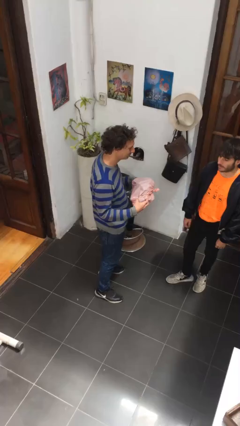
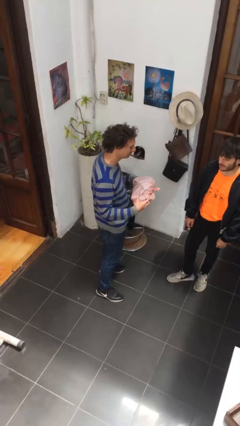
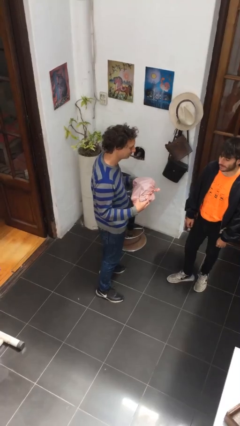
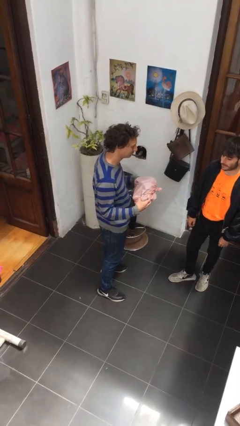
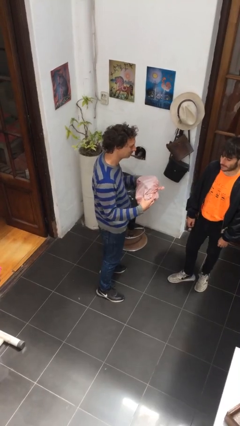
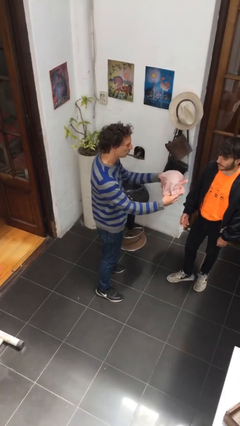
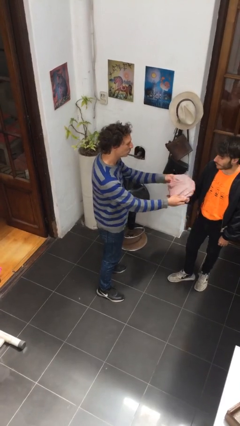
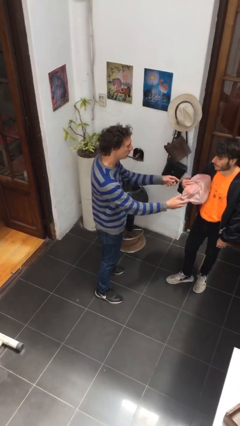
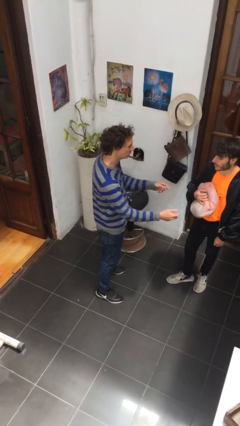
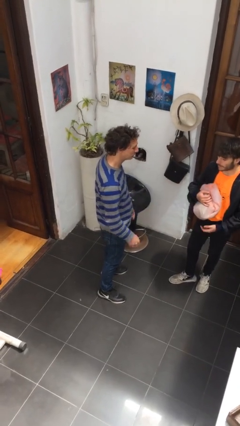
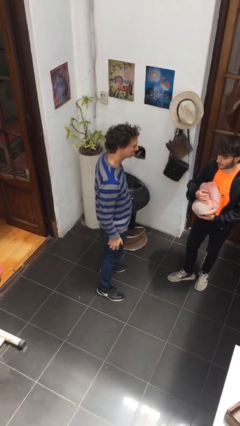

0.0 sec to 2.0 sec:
person transfers object to person

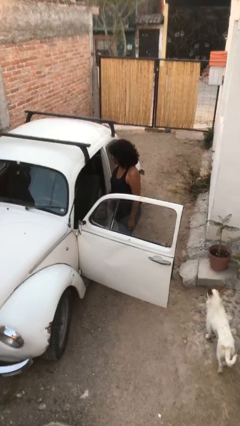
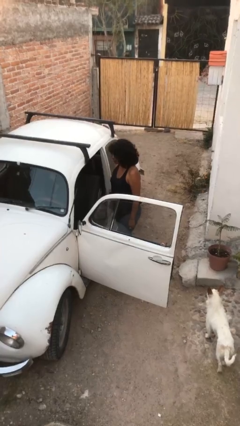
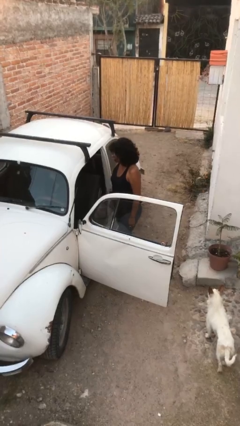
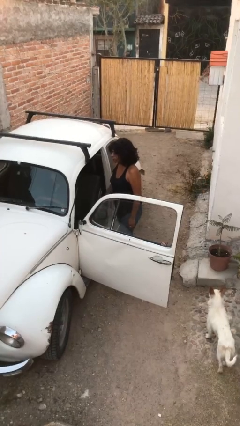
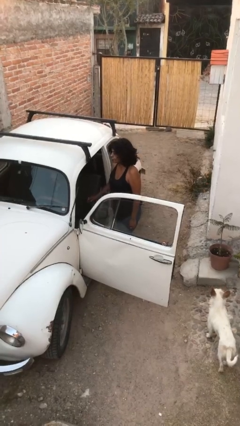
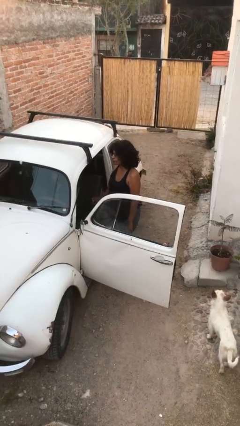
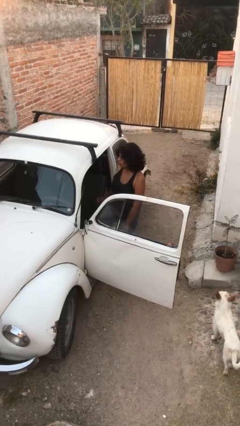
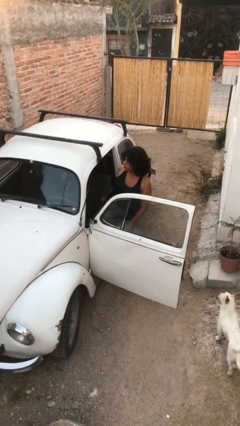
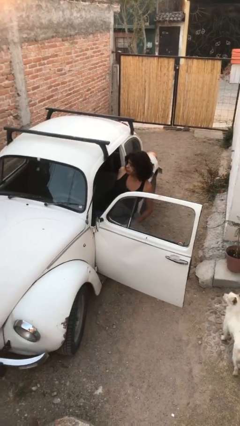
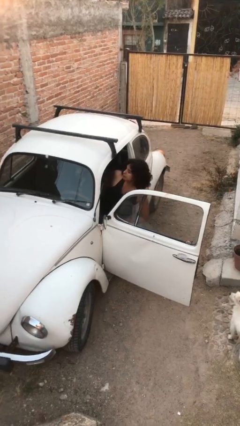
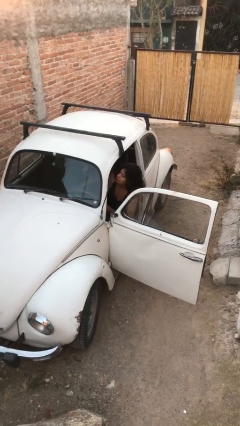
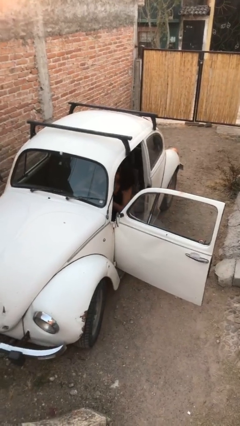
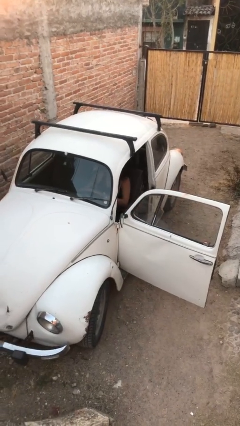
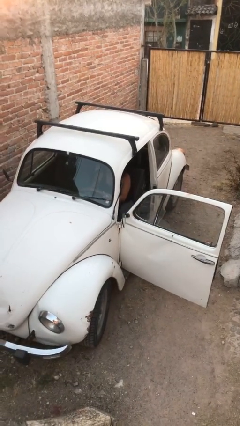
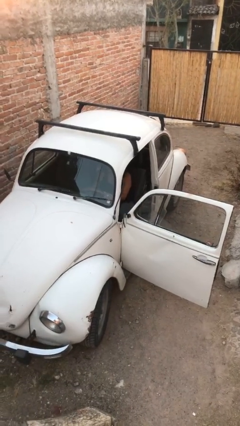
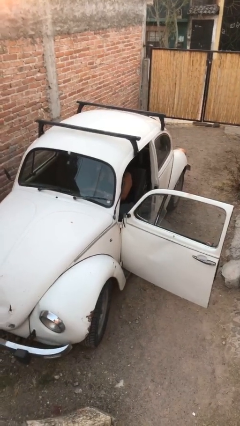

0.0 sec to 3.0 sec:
person enters car

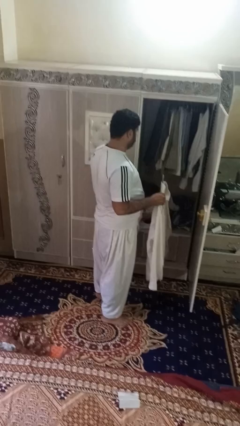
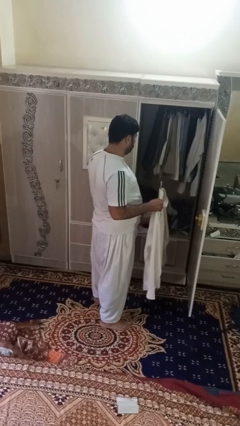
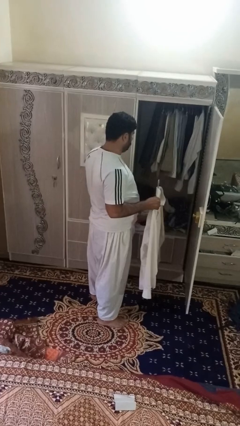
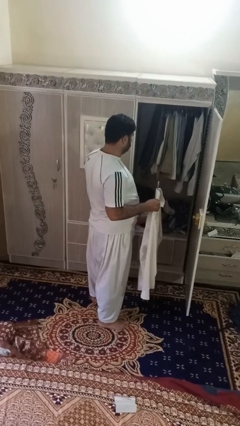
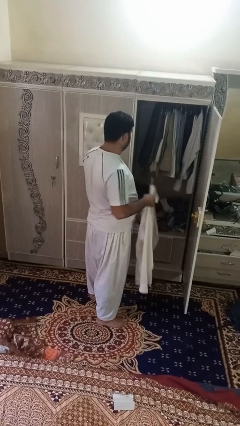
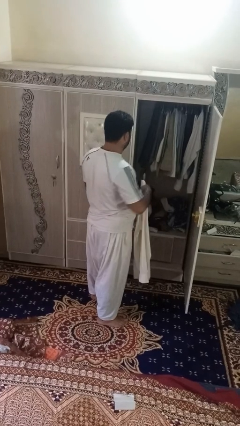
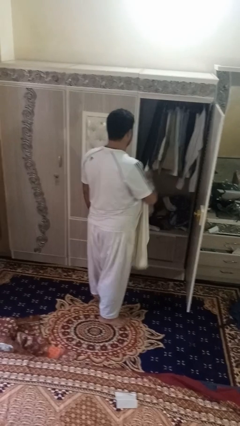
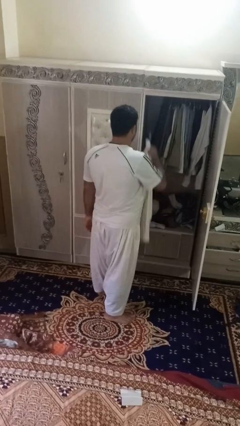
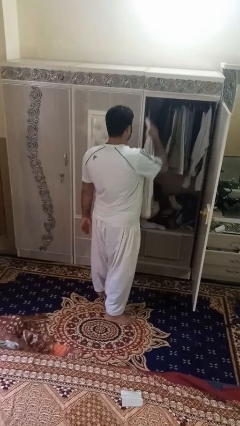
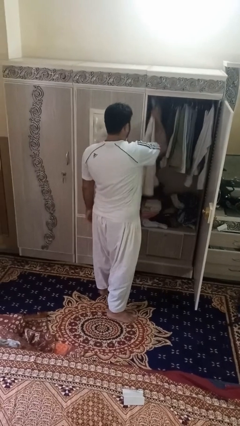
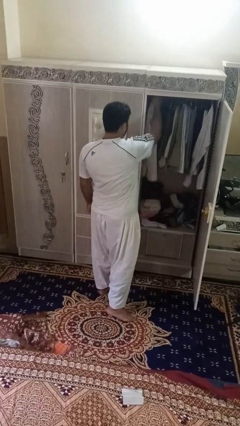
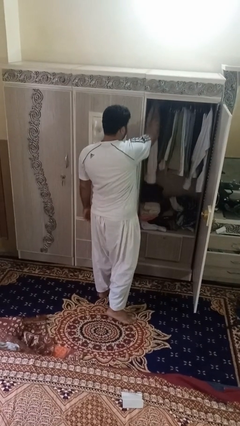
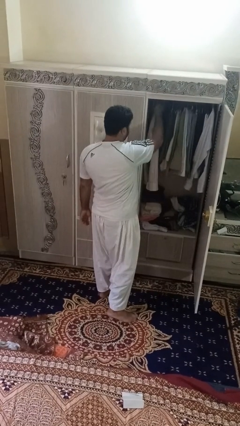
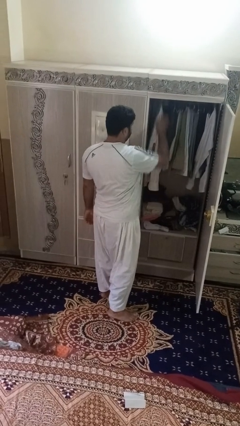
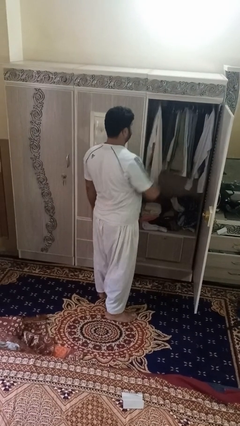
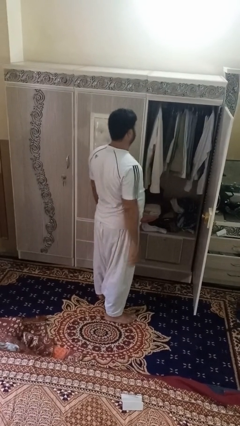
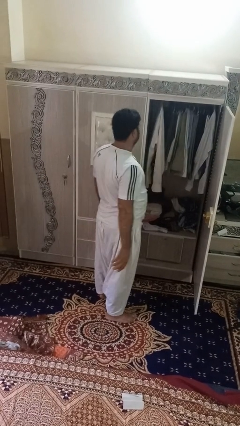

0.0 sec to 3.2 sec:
person puts clothes into closet

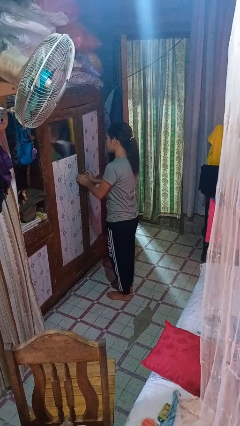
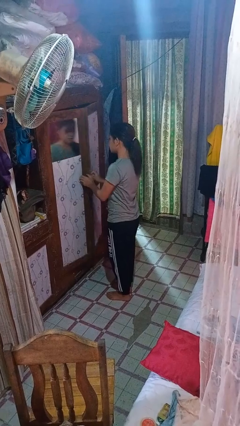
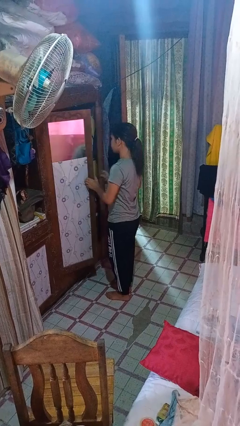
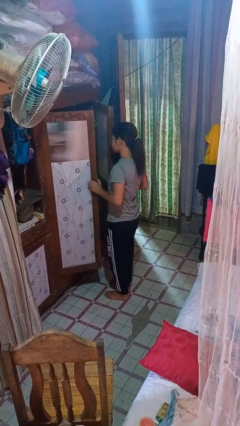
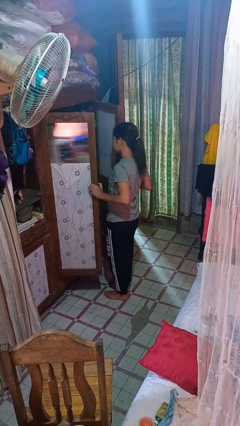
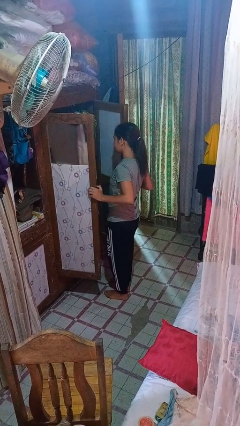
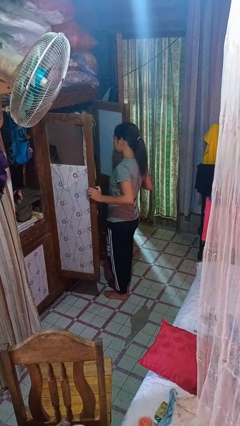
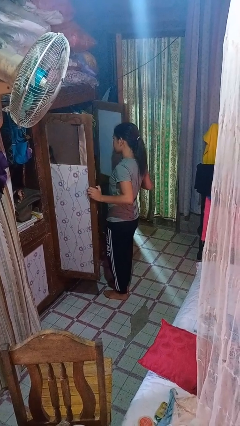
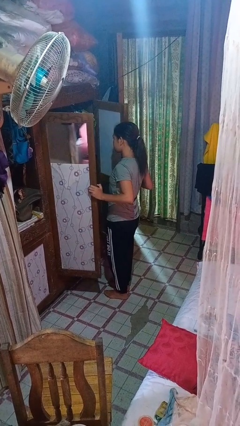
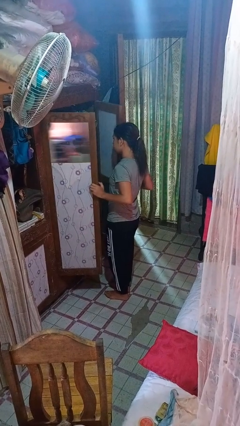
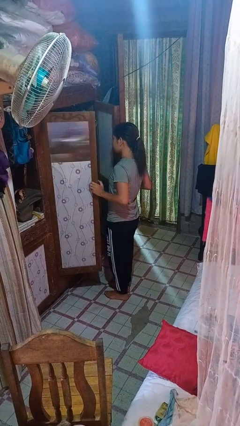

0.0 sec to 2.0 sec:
person opens closet door

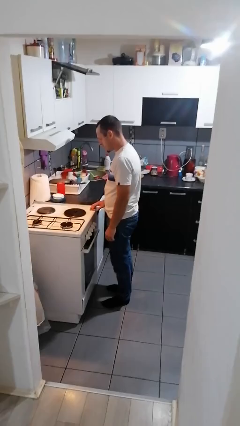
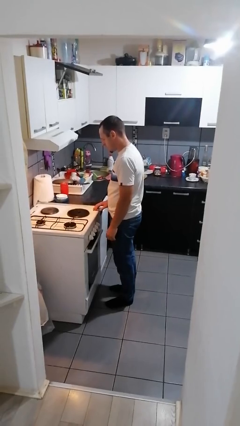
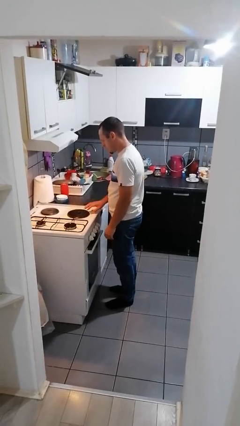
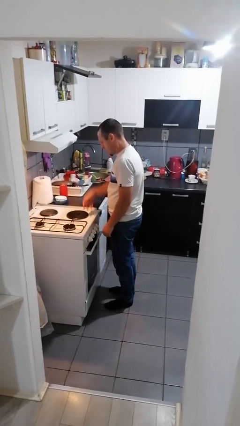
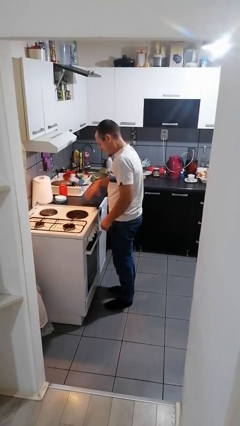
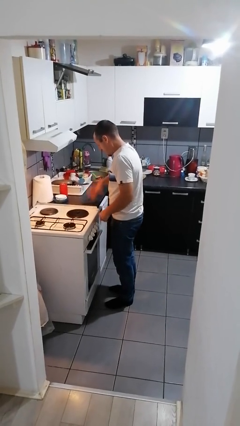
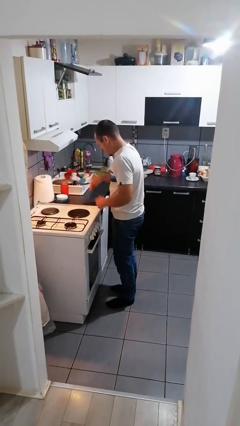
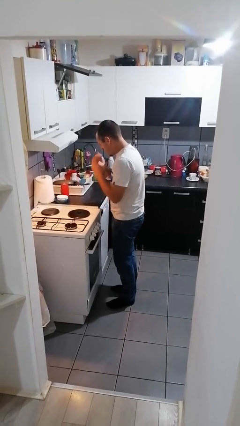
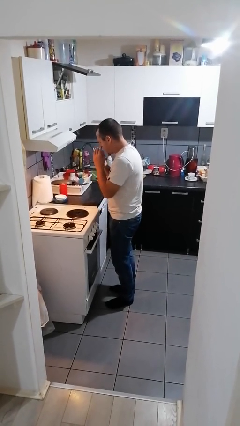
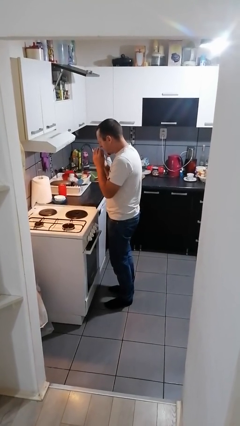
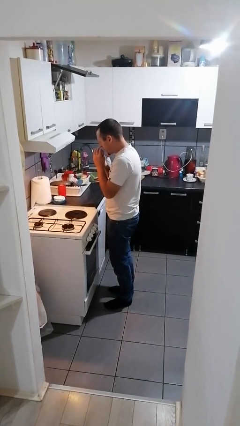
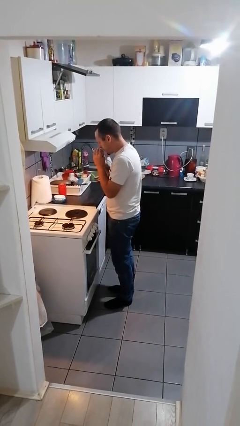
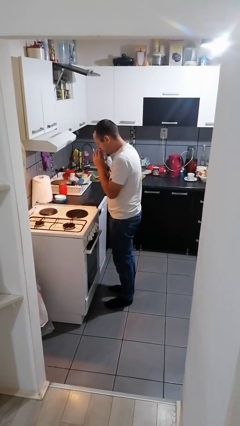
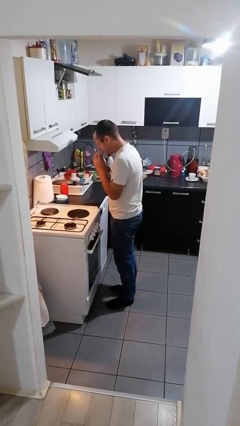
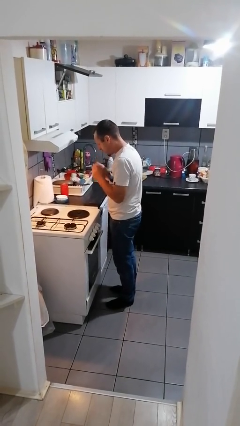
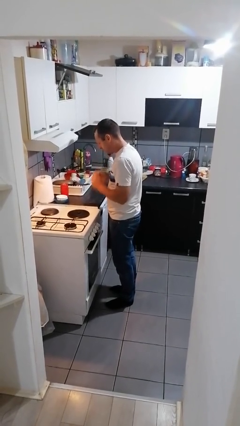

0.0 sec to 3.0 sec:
person burns hand

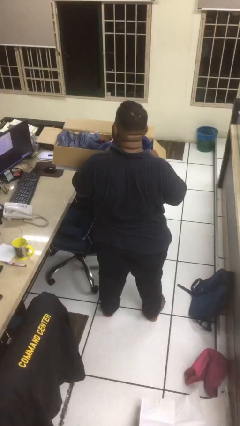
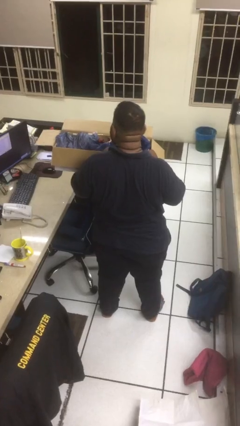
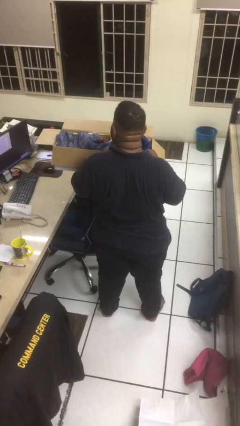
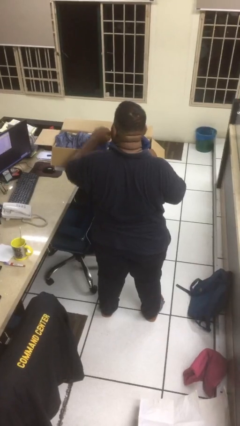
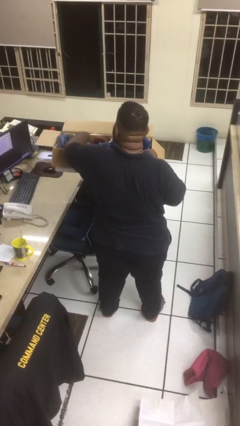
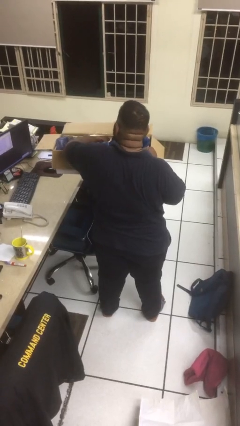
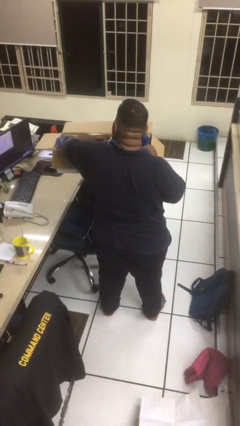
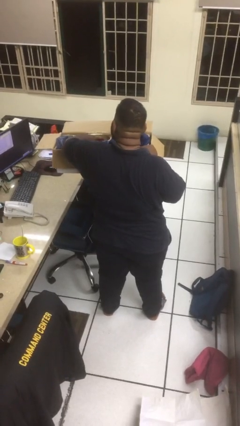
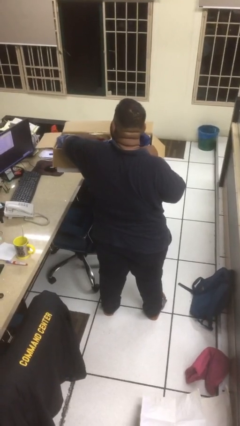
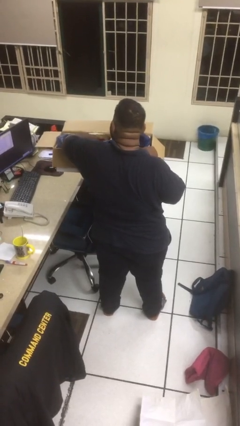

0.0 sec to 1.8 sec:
person searches in box

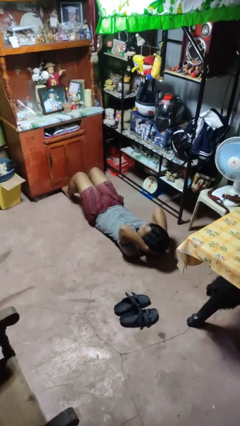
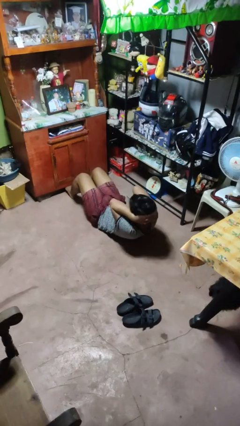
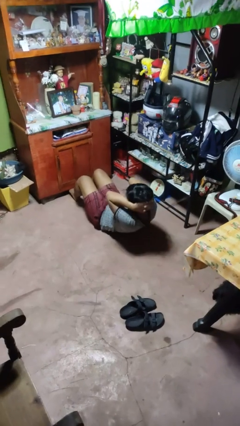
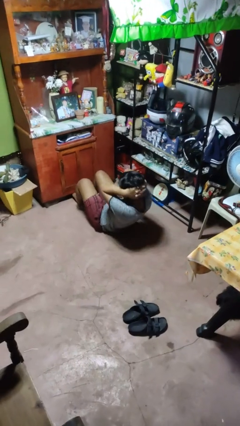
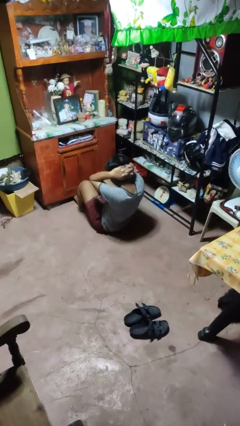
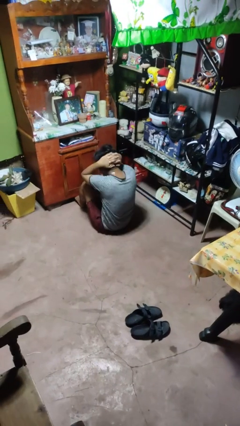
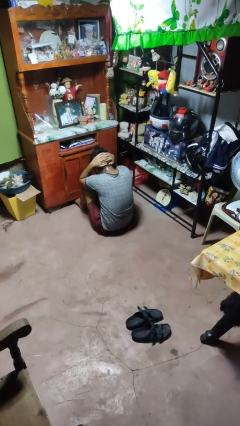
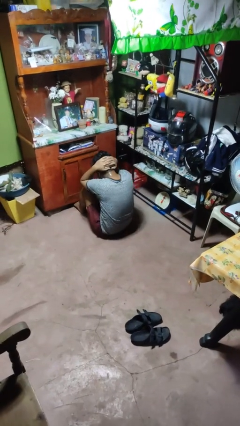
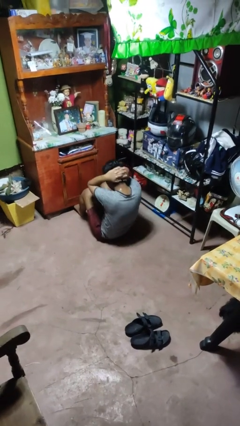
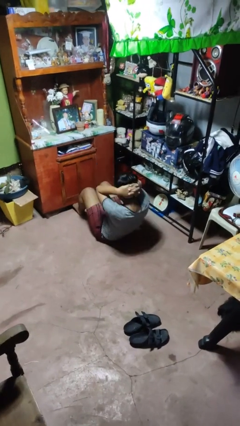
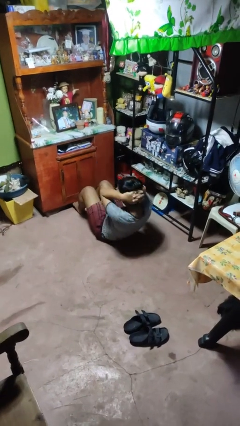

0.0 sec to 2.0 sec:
person exercises with situp

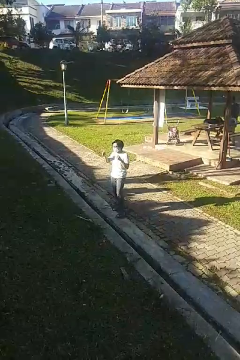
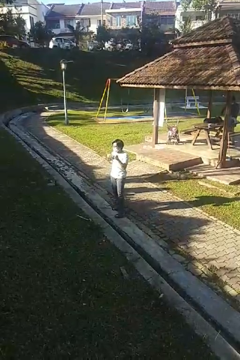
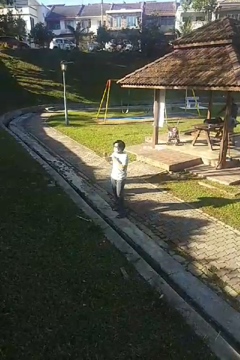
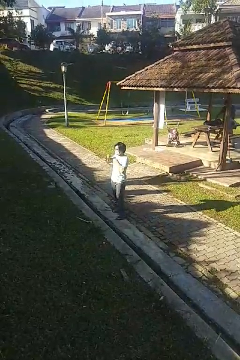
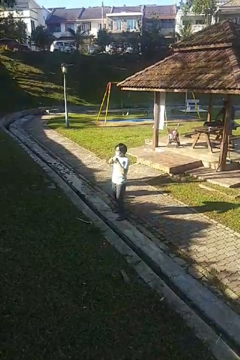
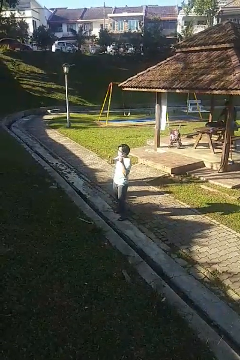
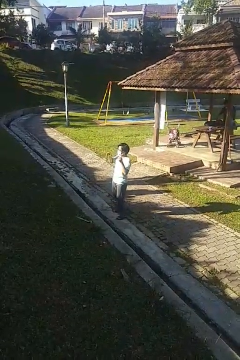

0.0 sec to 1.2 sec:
person drums on chest
